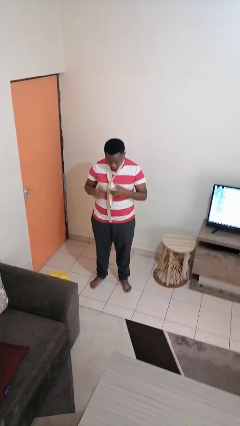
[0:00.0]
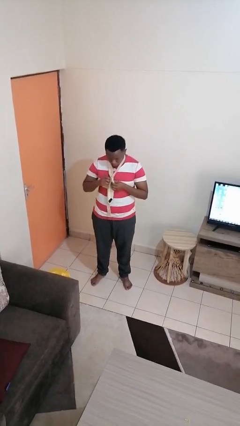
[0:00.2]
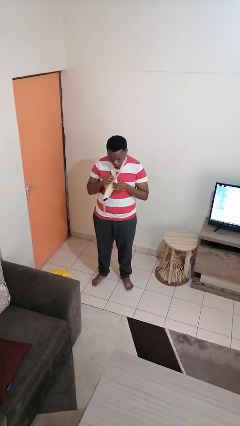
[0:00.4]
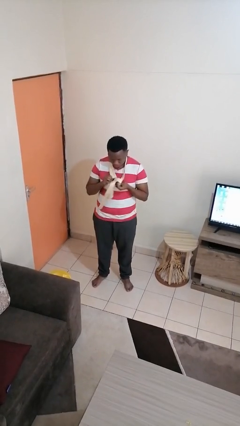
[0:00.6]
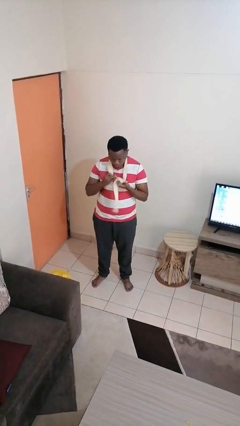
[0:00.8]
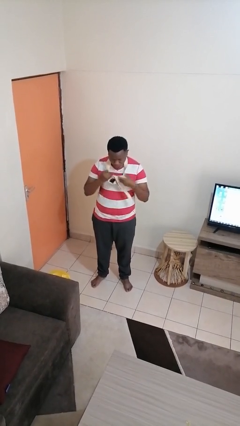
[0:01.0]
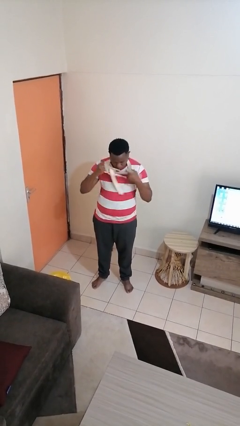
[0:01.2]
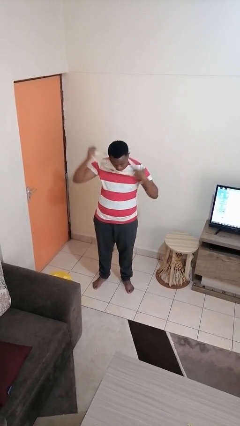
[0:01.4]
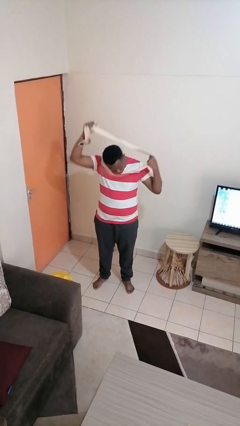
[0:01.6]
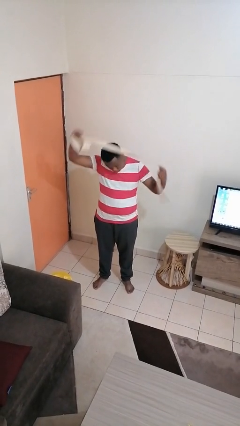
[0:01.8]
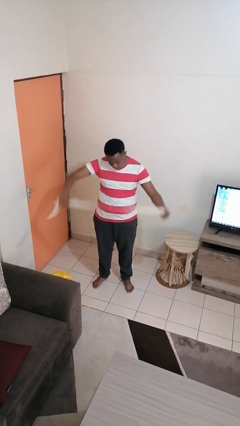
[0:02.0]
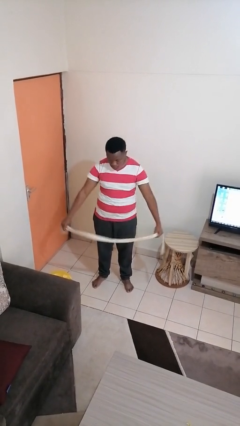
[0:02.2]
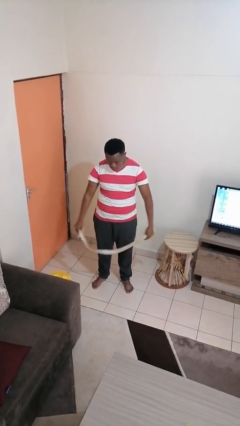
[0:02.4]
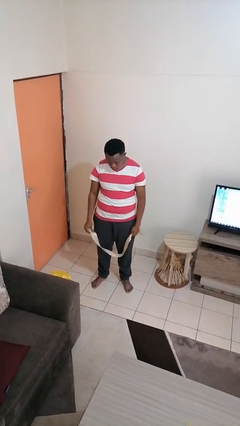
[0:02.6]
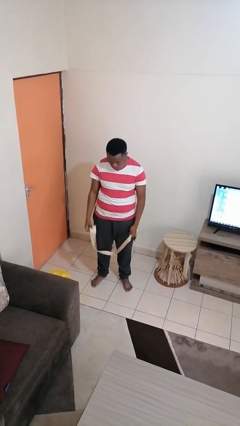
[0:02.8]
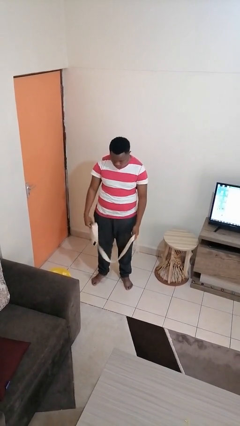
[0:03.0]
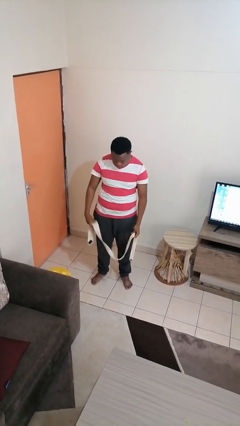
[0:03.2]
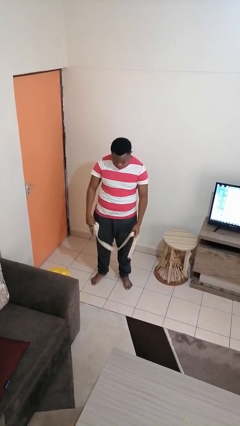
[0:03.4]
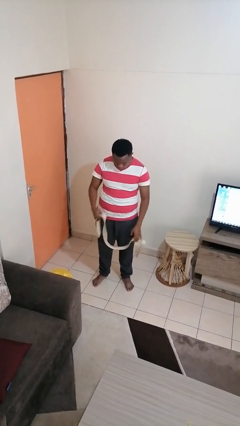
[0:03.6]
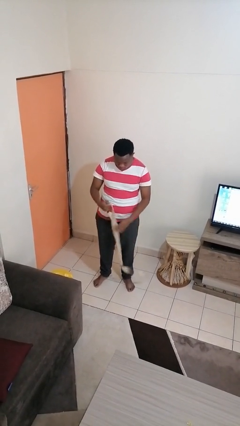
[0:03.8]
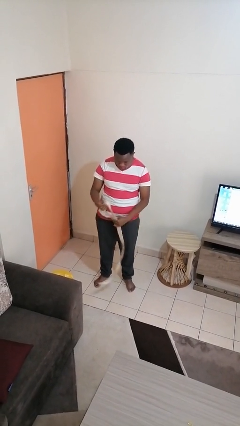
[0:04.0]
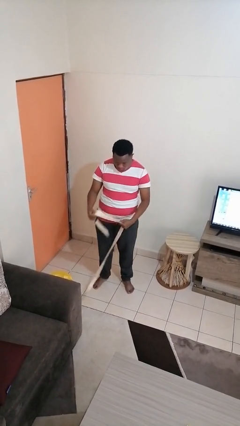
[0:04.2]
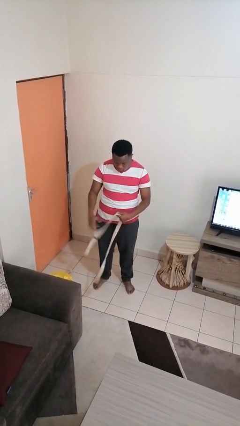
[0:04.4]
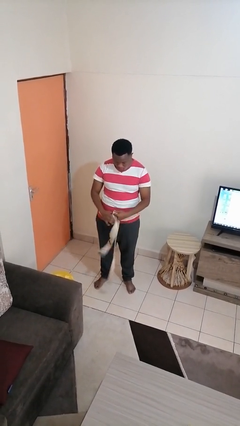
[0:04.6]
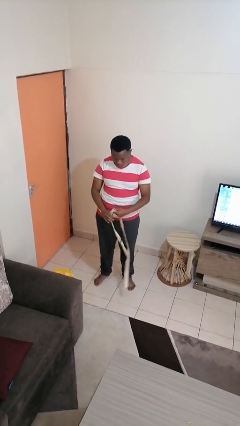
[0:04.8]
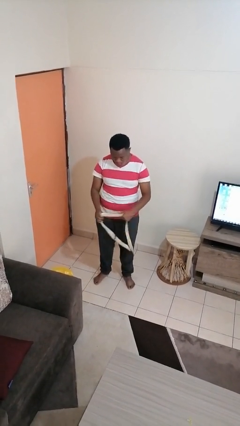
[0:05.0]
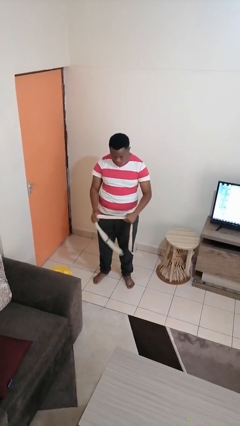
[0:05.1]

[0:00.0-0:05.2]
person takes off necktie

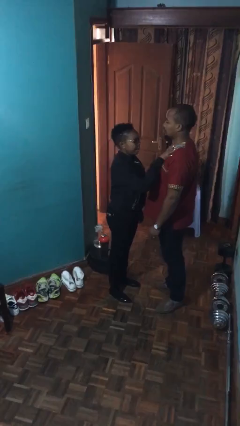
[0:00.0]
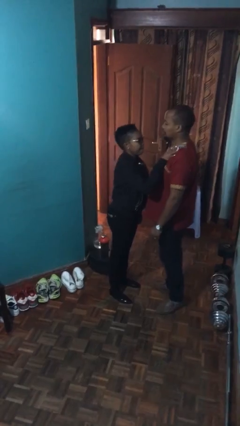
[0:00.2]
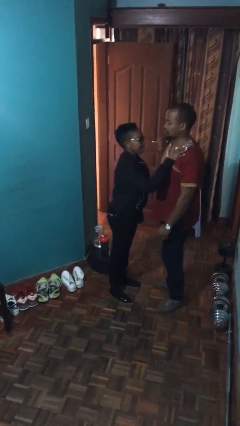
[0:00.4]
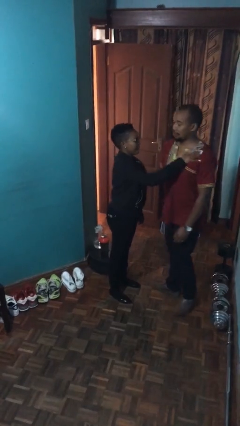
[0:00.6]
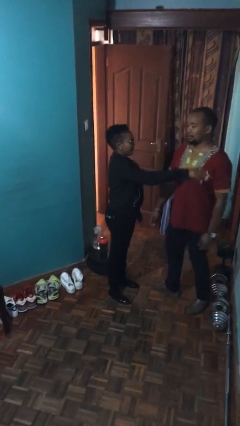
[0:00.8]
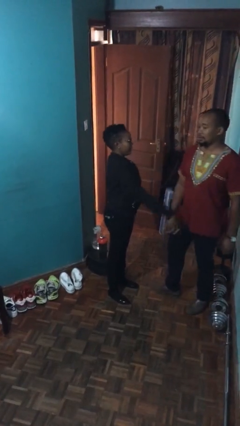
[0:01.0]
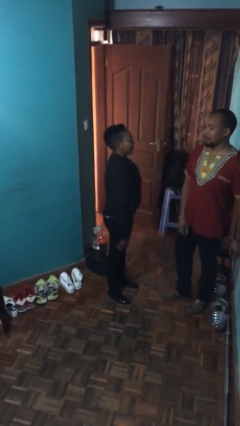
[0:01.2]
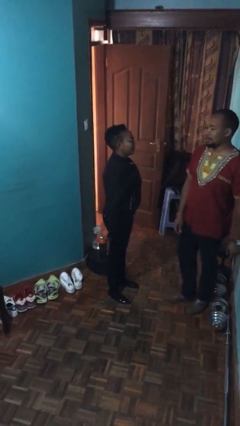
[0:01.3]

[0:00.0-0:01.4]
person shoves person

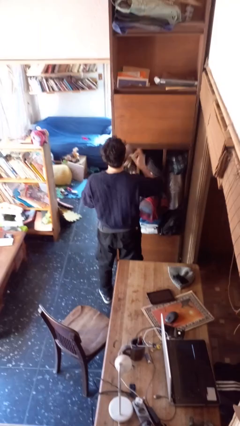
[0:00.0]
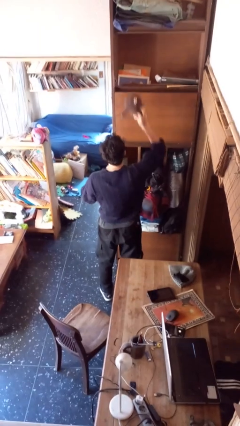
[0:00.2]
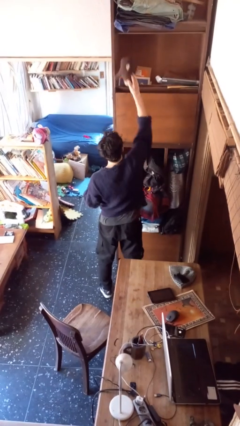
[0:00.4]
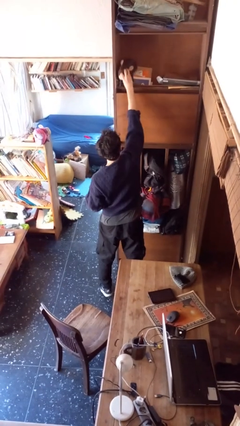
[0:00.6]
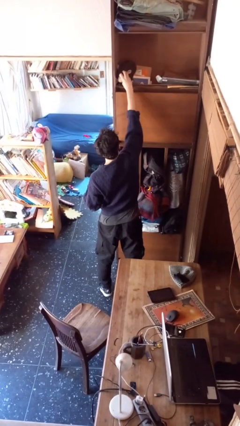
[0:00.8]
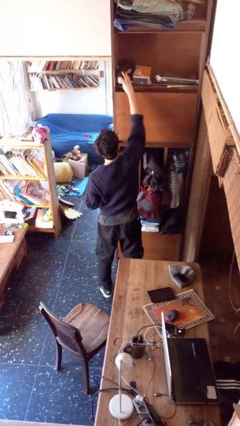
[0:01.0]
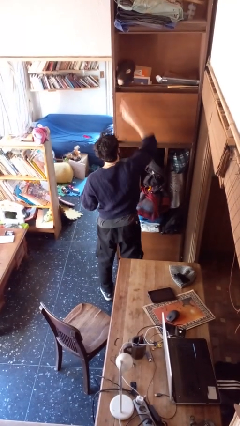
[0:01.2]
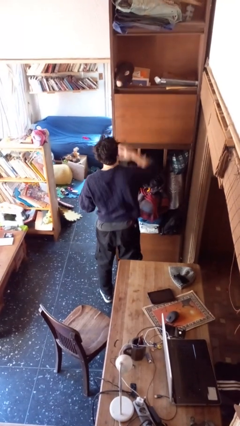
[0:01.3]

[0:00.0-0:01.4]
person puts down object on shelf

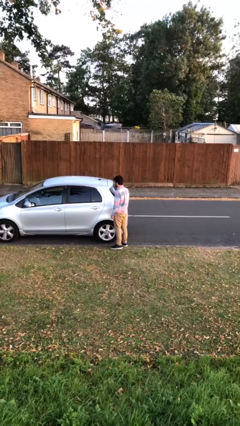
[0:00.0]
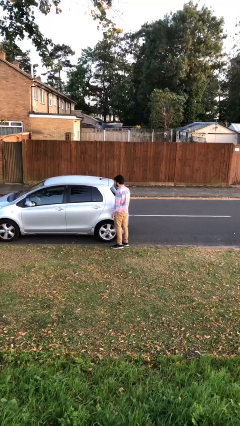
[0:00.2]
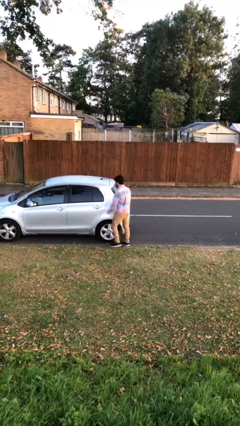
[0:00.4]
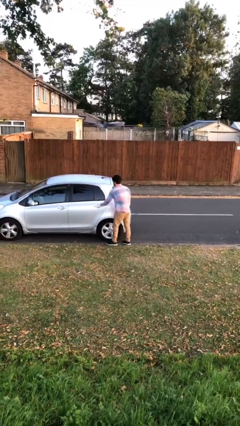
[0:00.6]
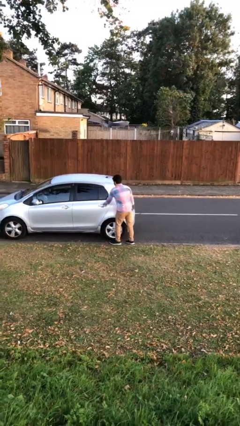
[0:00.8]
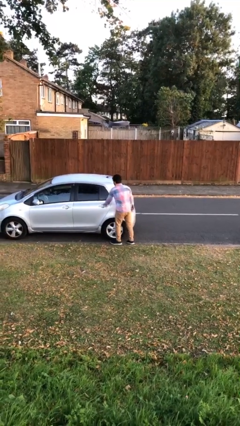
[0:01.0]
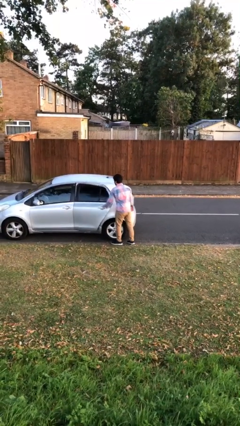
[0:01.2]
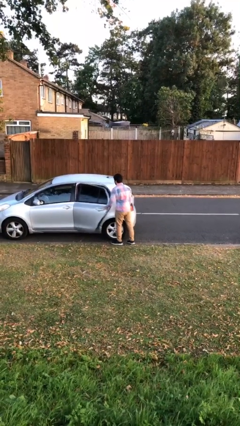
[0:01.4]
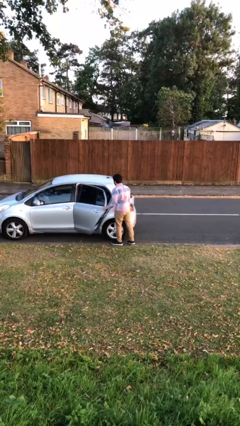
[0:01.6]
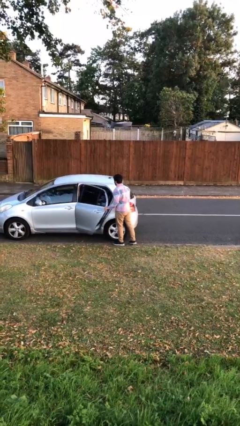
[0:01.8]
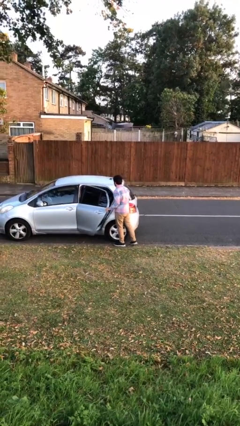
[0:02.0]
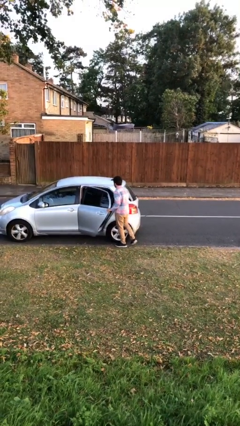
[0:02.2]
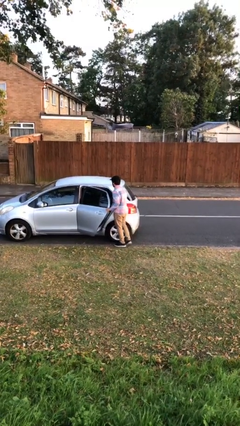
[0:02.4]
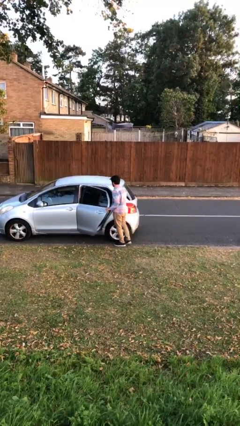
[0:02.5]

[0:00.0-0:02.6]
person opens car door

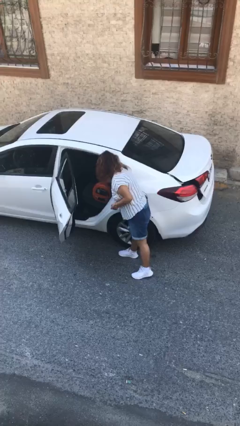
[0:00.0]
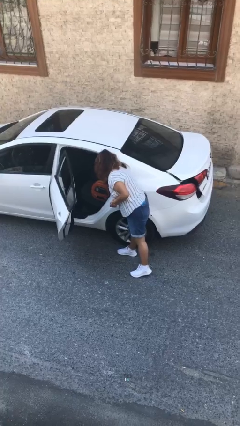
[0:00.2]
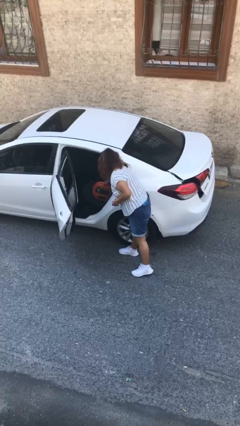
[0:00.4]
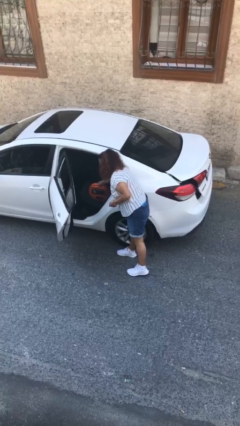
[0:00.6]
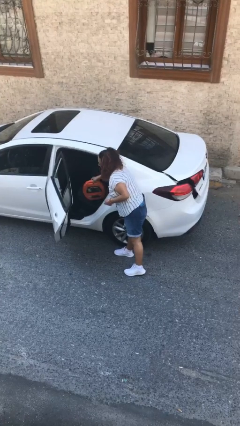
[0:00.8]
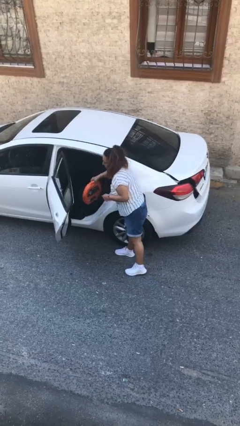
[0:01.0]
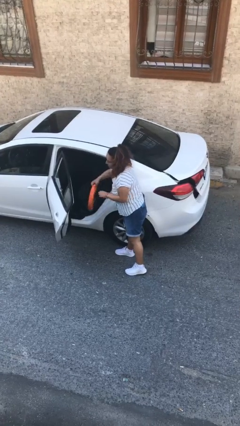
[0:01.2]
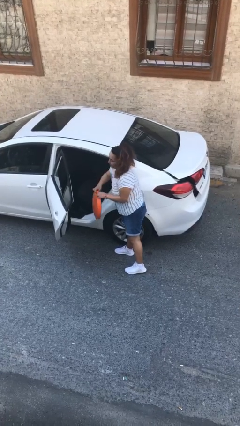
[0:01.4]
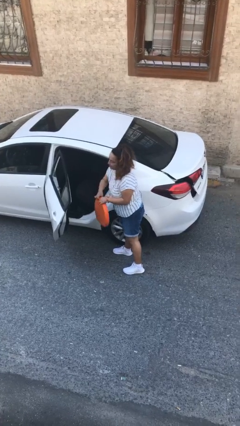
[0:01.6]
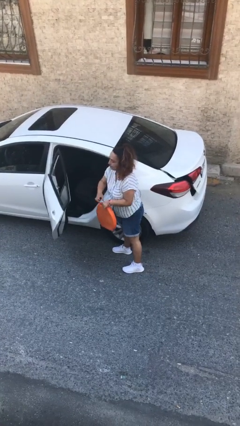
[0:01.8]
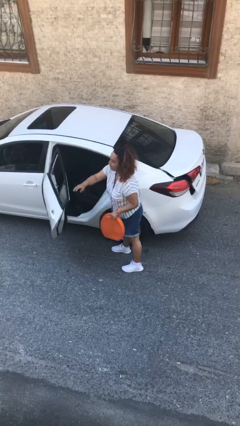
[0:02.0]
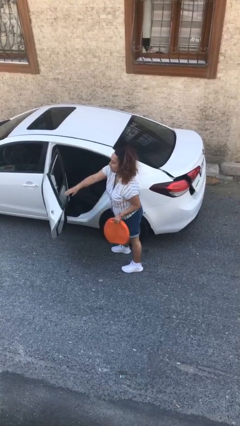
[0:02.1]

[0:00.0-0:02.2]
person unloads car

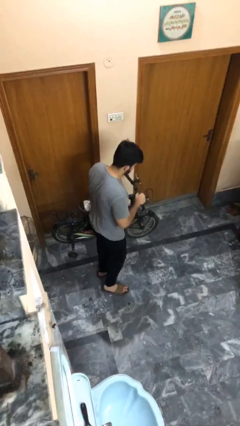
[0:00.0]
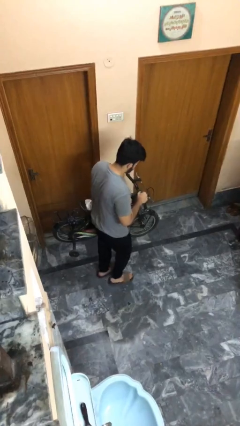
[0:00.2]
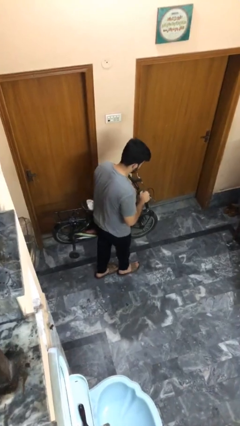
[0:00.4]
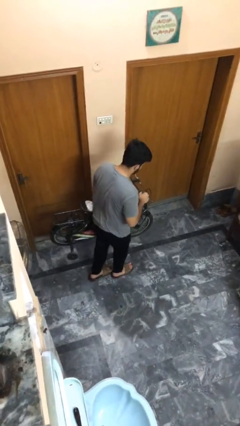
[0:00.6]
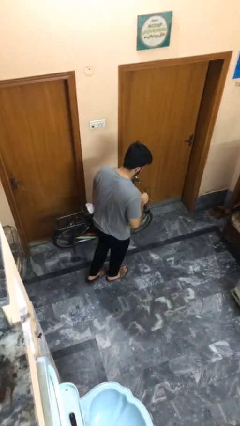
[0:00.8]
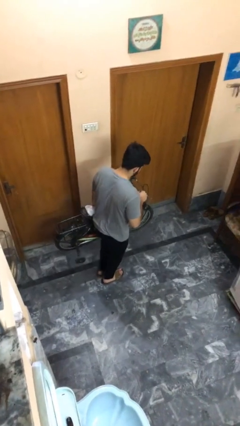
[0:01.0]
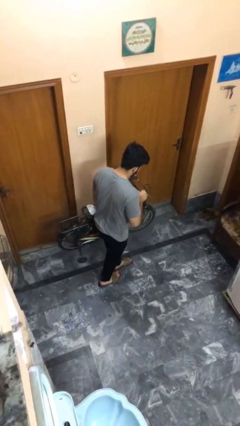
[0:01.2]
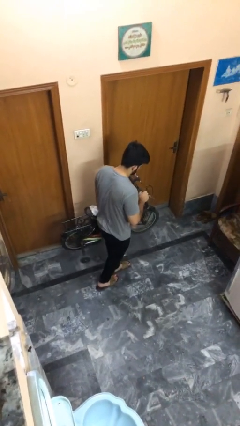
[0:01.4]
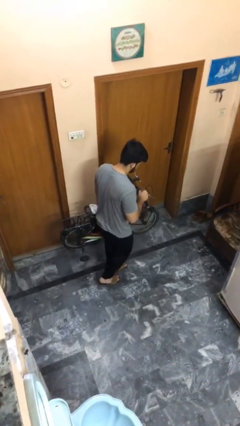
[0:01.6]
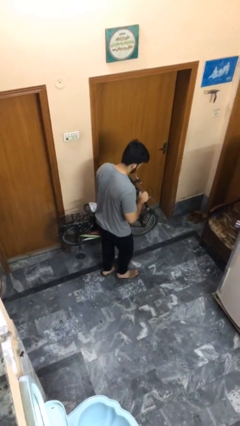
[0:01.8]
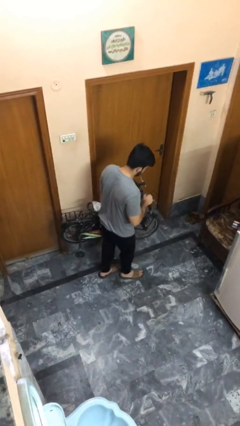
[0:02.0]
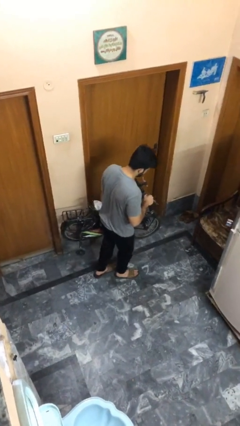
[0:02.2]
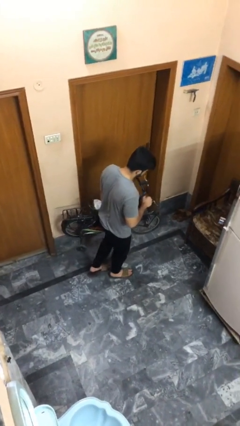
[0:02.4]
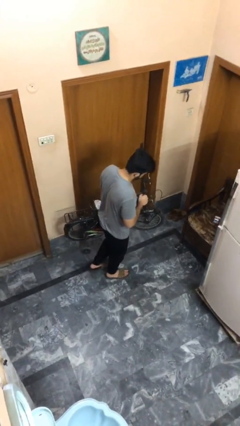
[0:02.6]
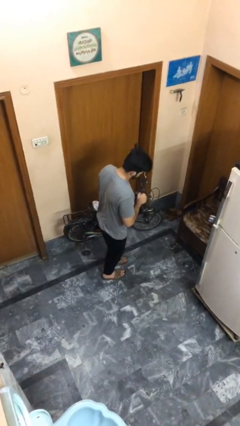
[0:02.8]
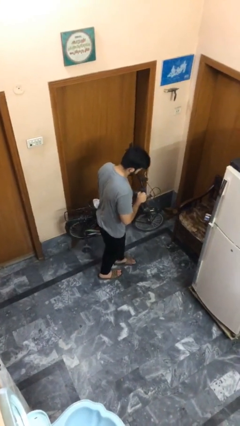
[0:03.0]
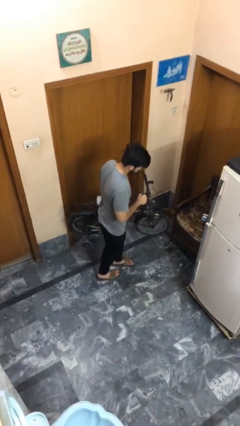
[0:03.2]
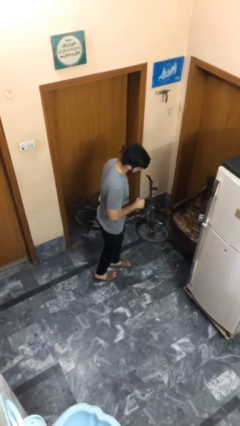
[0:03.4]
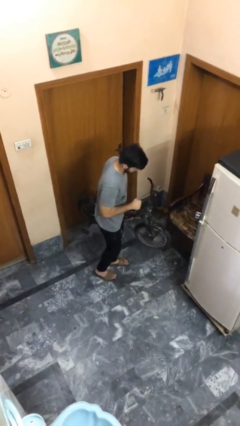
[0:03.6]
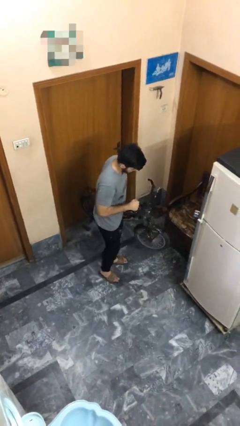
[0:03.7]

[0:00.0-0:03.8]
person carries bicycle

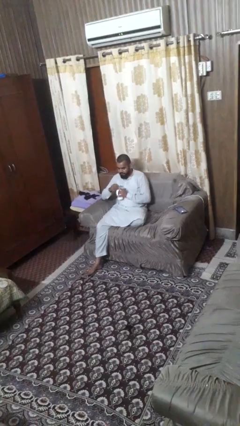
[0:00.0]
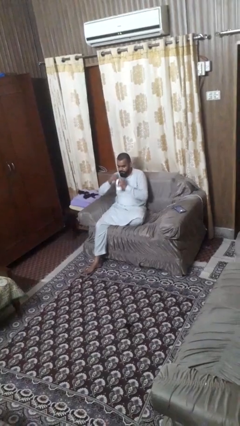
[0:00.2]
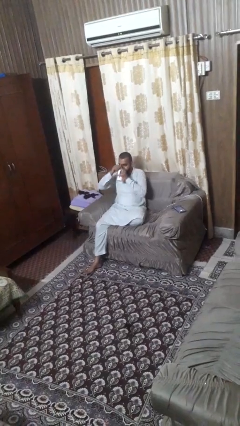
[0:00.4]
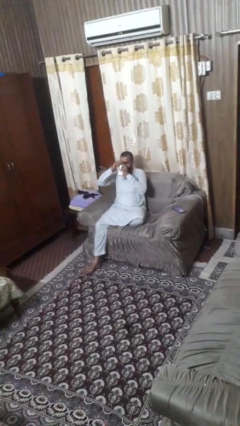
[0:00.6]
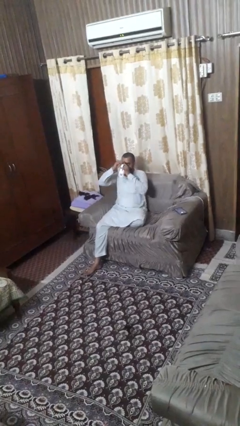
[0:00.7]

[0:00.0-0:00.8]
person stirs mug
